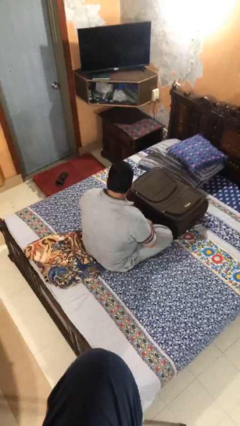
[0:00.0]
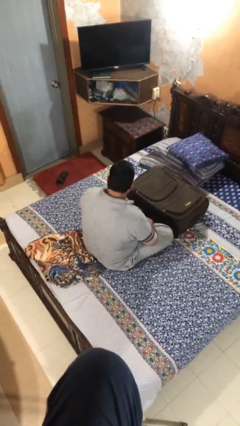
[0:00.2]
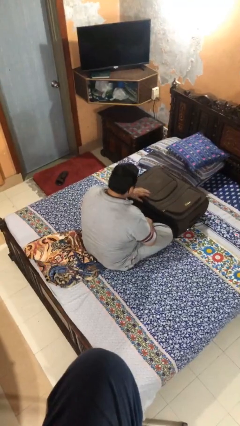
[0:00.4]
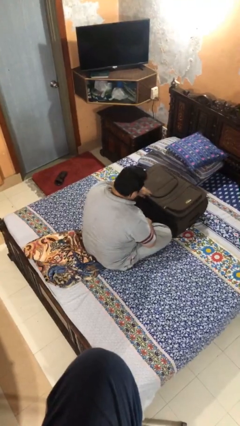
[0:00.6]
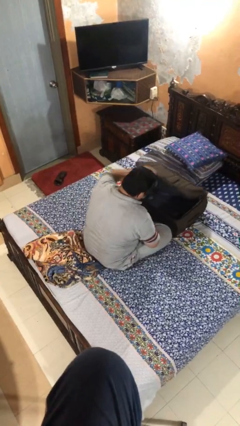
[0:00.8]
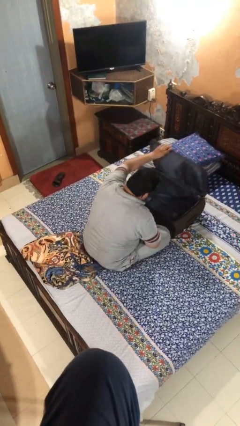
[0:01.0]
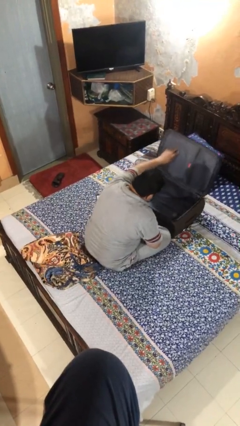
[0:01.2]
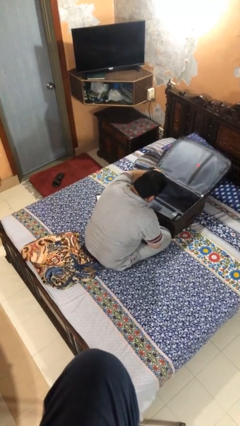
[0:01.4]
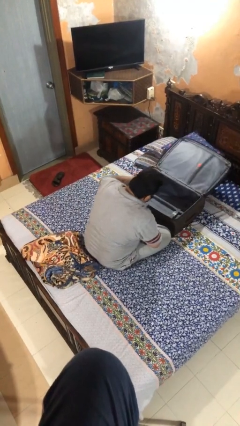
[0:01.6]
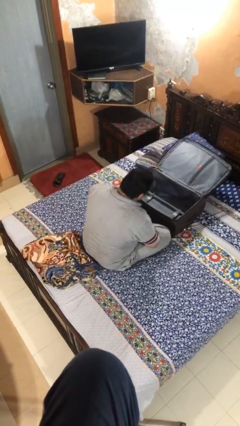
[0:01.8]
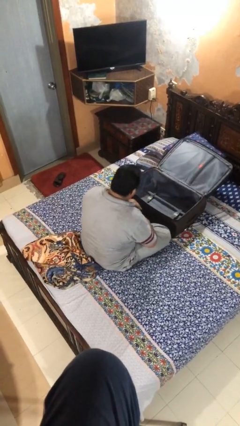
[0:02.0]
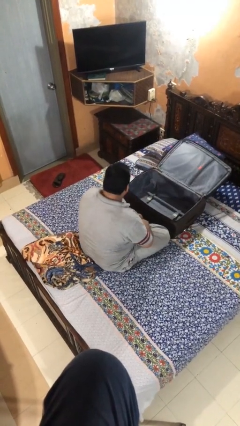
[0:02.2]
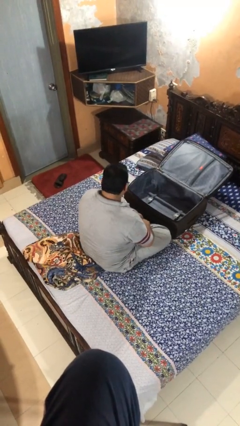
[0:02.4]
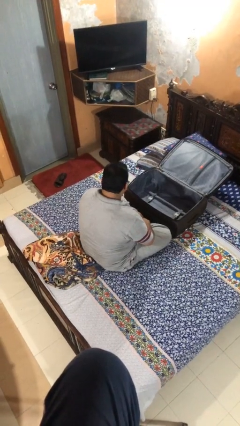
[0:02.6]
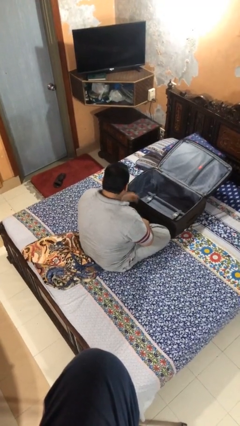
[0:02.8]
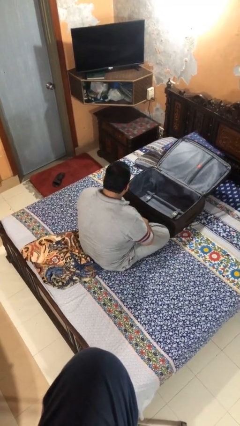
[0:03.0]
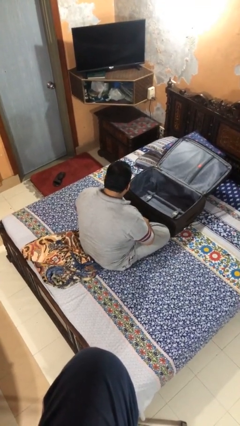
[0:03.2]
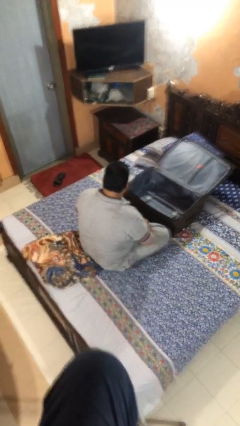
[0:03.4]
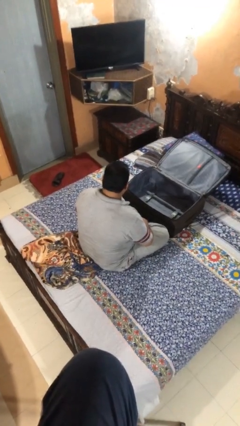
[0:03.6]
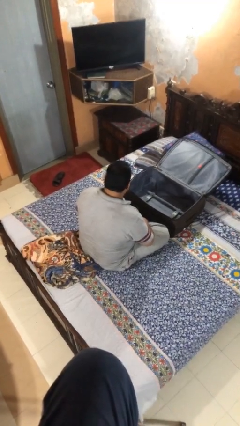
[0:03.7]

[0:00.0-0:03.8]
person opens suitcase

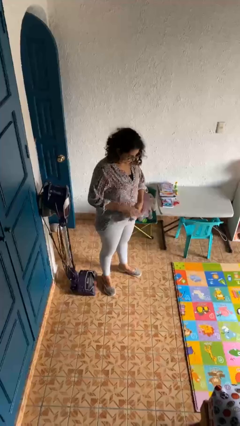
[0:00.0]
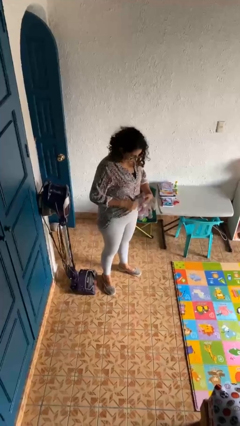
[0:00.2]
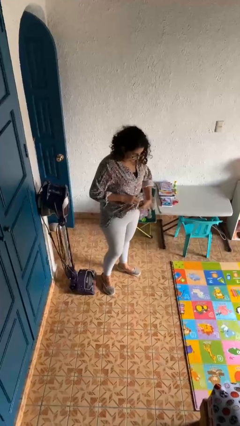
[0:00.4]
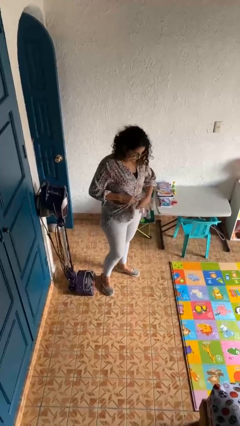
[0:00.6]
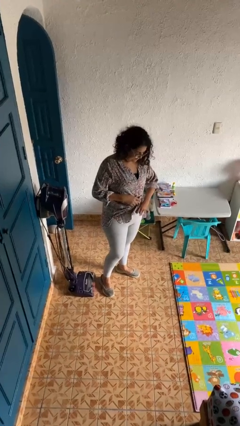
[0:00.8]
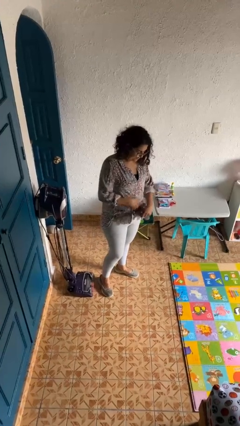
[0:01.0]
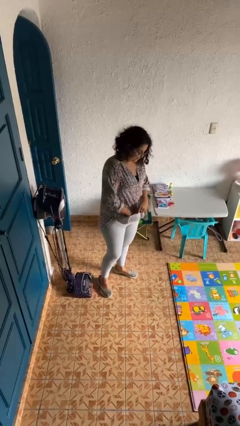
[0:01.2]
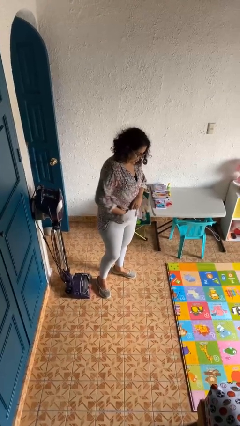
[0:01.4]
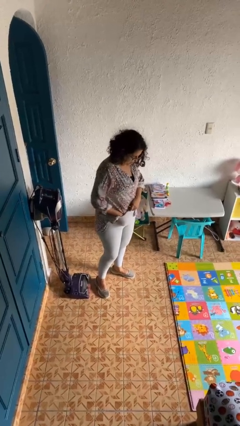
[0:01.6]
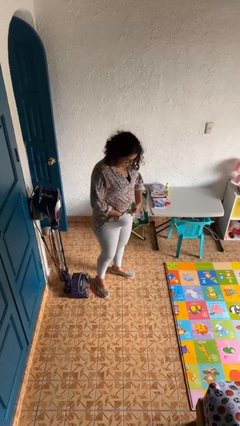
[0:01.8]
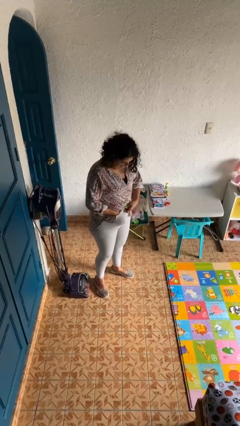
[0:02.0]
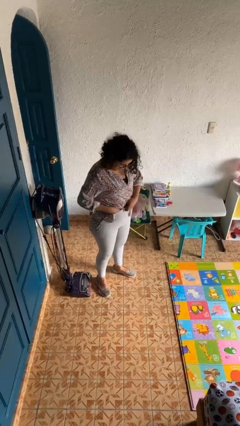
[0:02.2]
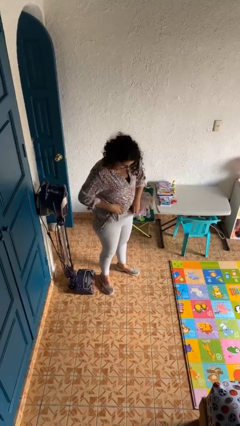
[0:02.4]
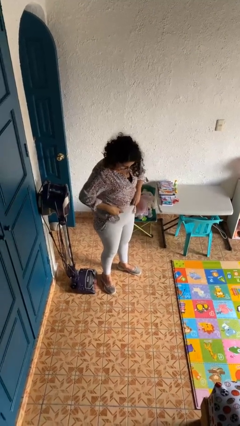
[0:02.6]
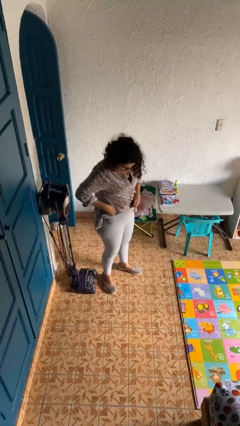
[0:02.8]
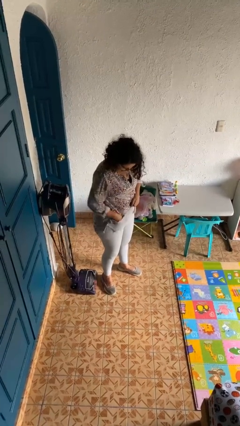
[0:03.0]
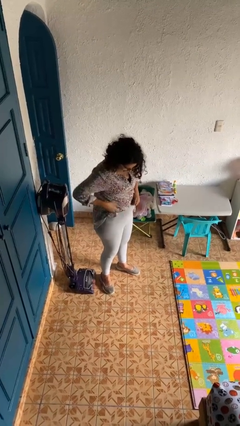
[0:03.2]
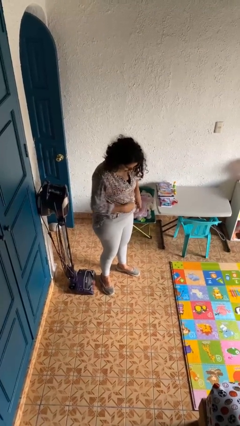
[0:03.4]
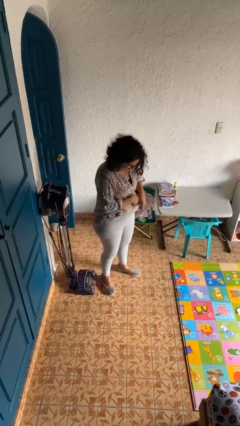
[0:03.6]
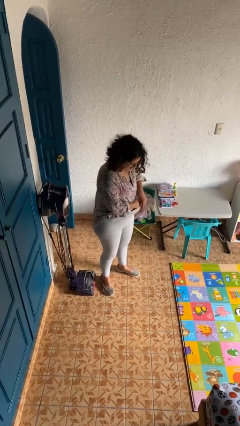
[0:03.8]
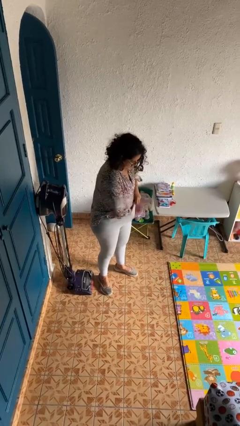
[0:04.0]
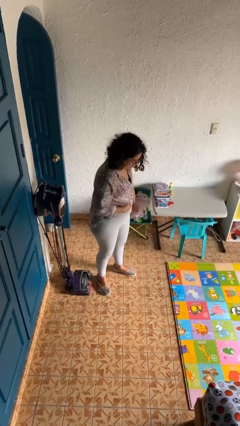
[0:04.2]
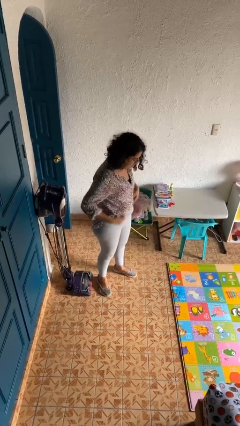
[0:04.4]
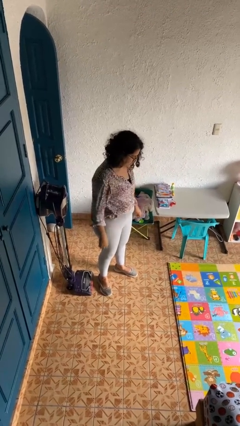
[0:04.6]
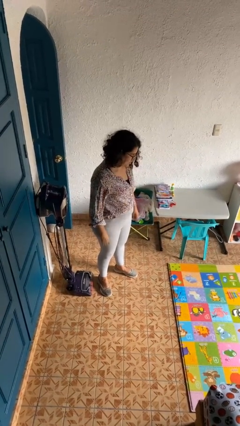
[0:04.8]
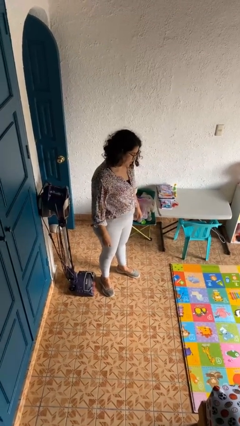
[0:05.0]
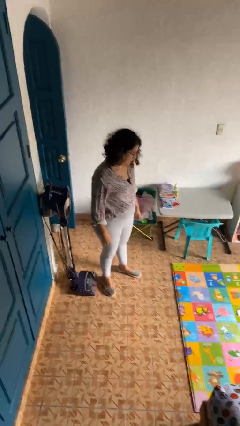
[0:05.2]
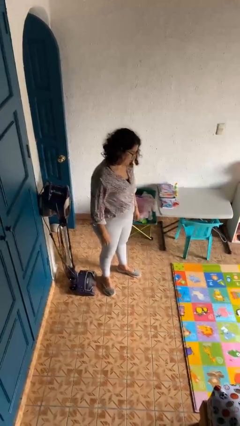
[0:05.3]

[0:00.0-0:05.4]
person tucks in shirt

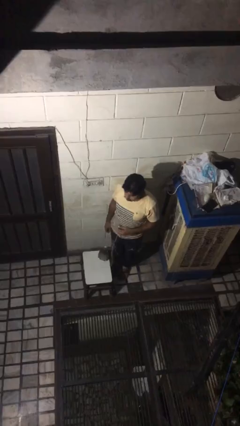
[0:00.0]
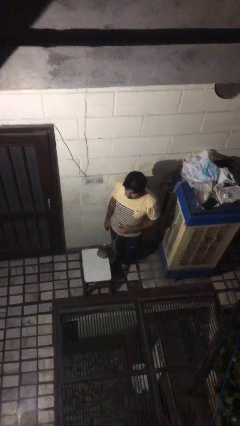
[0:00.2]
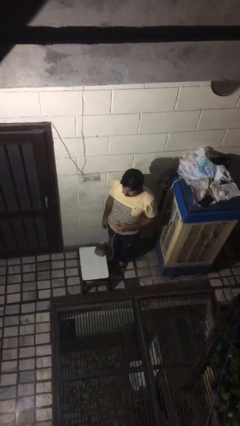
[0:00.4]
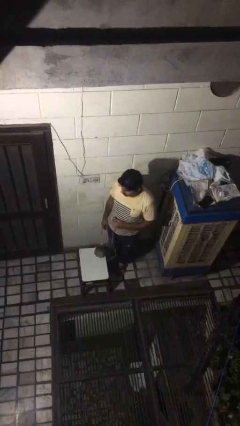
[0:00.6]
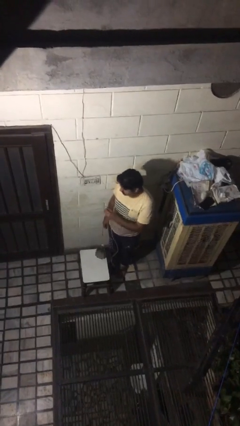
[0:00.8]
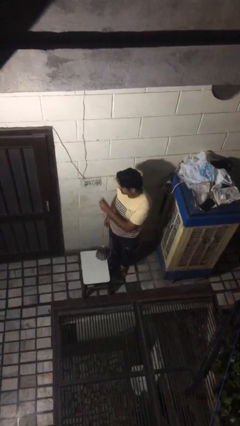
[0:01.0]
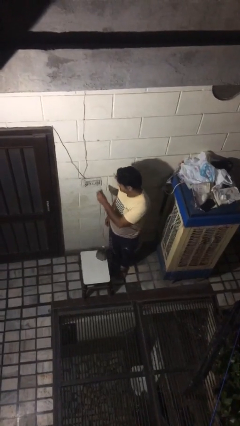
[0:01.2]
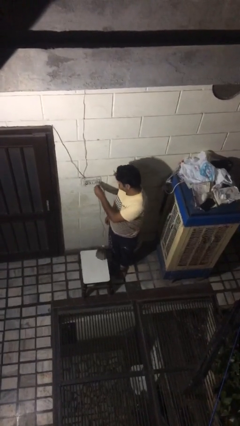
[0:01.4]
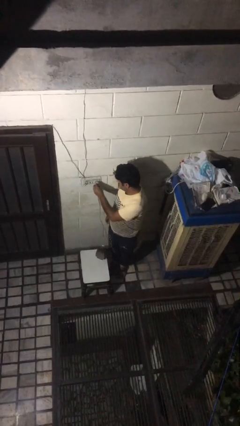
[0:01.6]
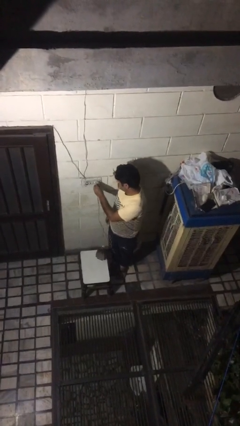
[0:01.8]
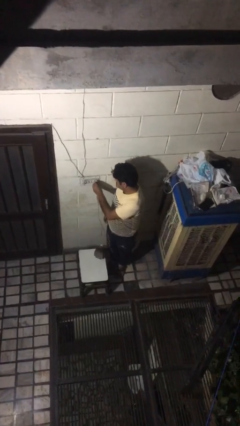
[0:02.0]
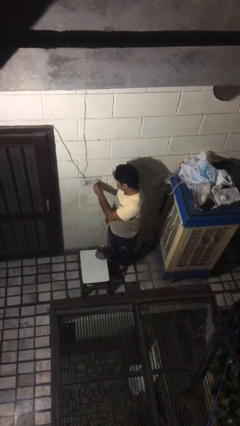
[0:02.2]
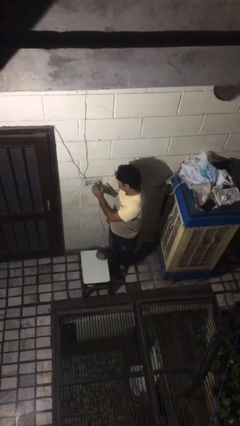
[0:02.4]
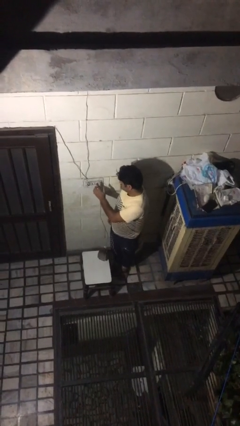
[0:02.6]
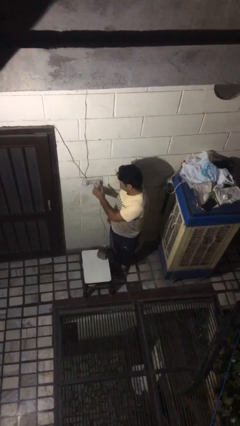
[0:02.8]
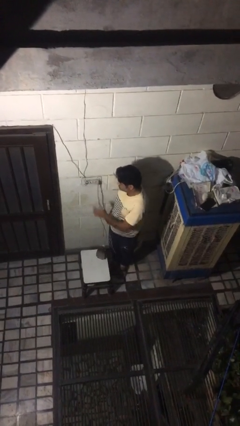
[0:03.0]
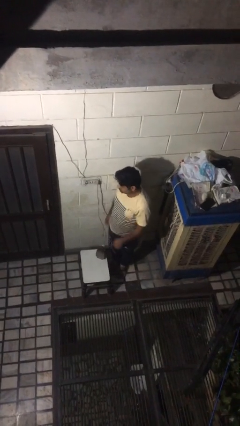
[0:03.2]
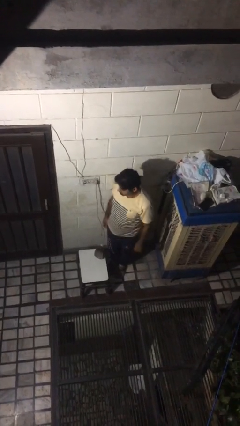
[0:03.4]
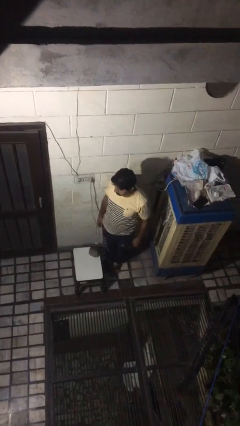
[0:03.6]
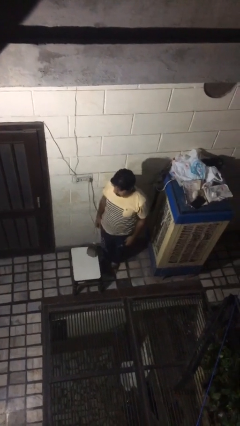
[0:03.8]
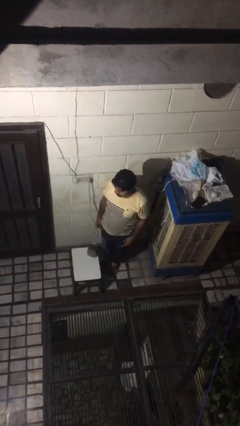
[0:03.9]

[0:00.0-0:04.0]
person plugs into electrical socket

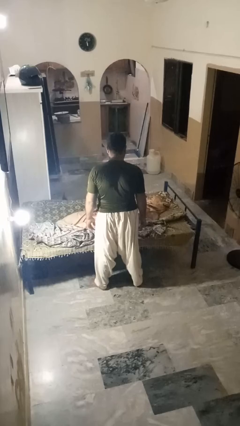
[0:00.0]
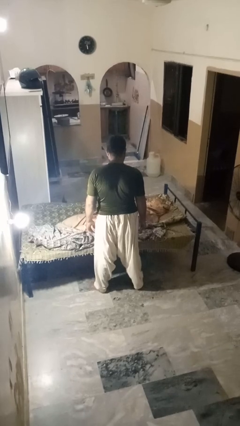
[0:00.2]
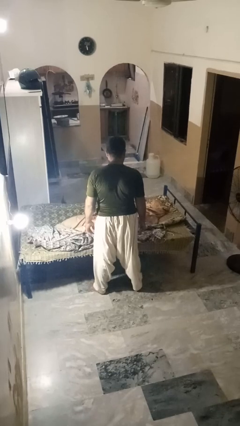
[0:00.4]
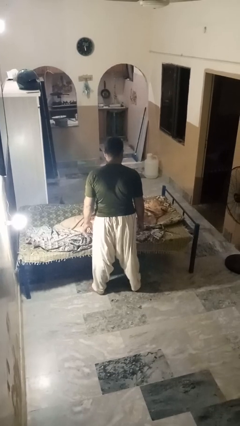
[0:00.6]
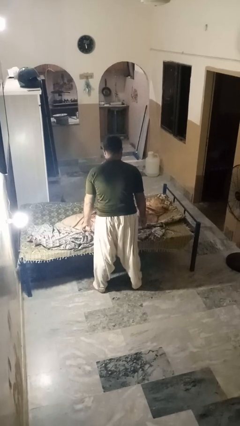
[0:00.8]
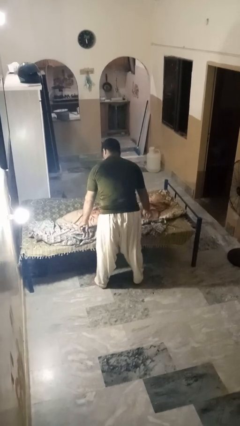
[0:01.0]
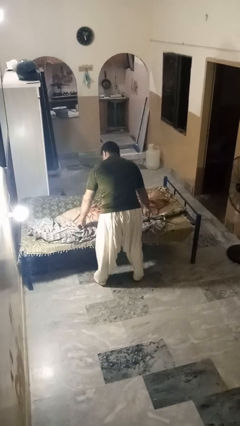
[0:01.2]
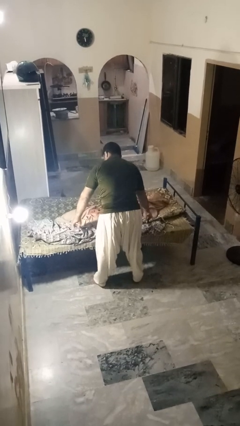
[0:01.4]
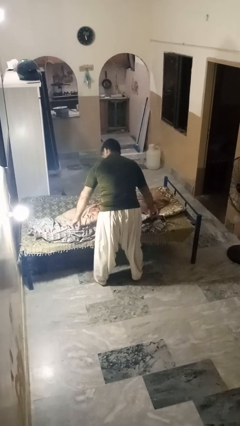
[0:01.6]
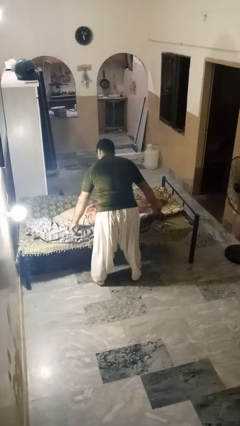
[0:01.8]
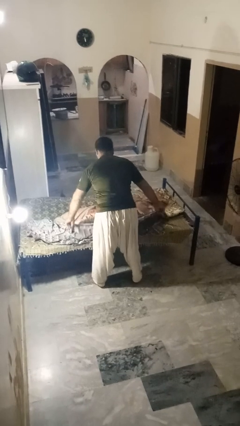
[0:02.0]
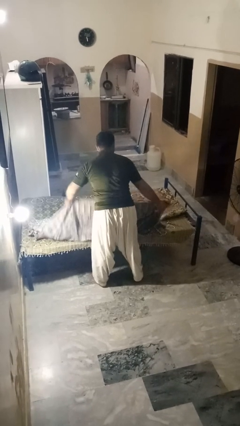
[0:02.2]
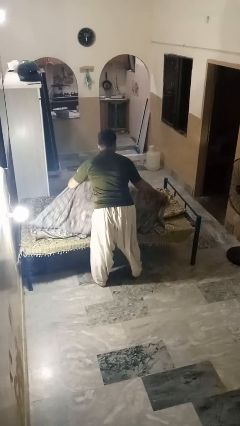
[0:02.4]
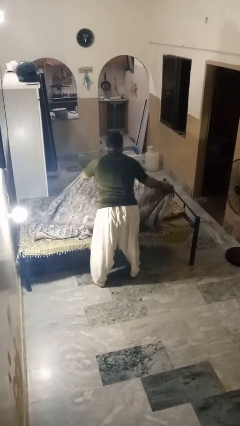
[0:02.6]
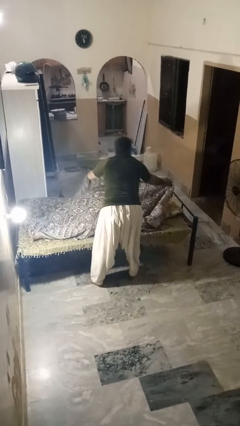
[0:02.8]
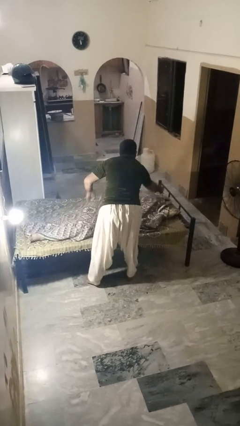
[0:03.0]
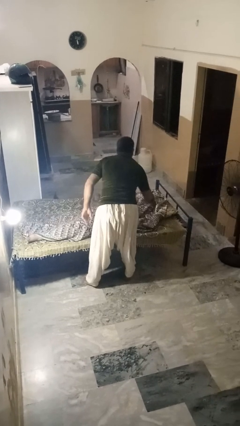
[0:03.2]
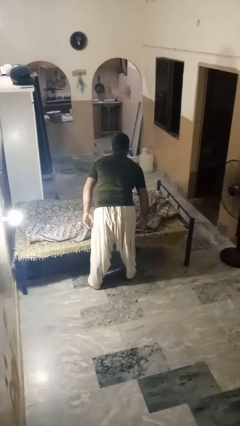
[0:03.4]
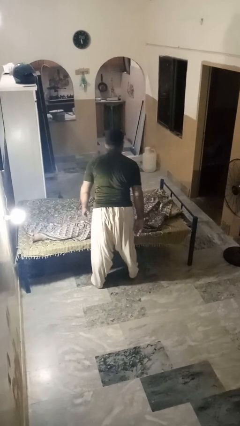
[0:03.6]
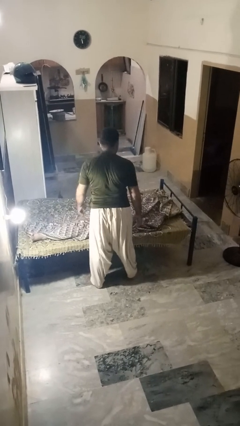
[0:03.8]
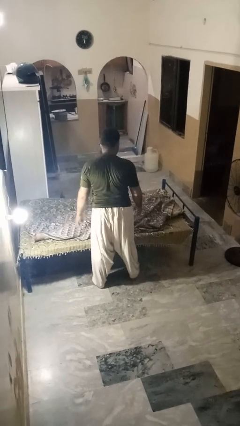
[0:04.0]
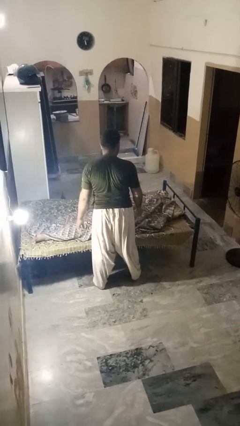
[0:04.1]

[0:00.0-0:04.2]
person covers friend with blanket

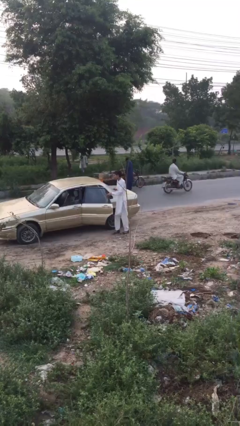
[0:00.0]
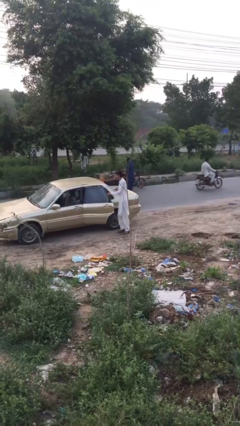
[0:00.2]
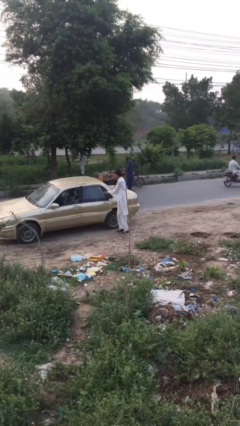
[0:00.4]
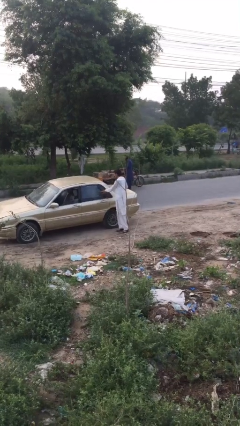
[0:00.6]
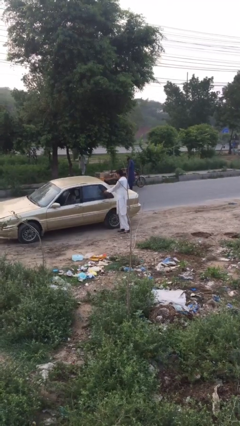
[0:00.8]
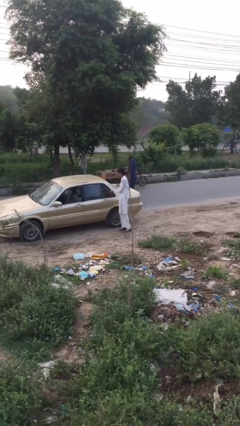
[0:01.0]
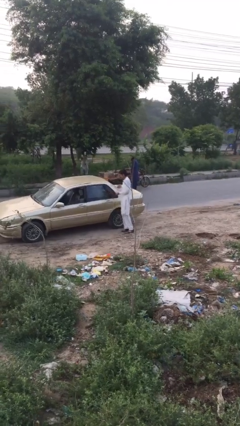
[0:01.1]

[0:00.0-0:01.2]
person closes car door
